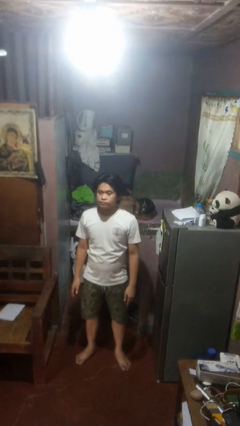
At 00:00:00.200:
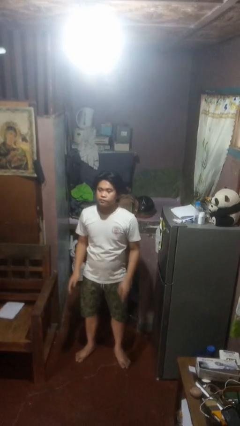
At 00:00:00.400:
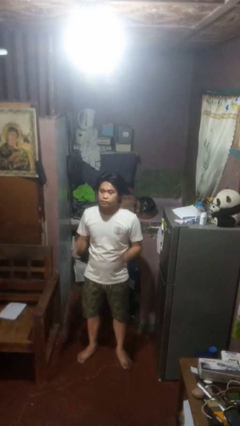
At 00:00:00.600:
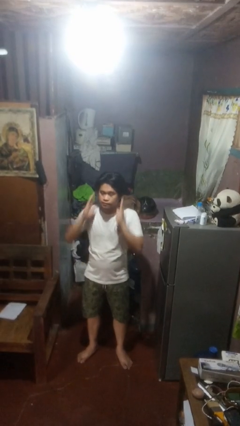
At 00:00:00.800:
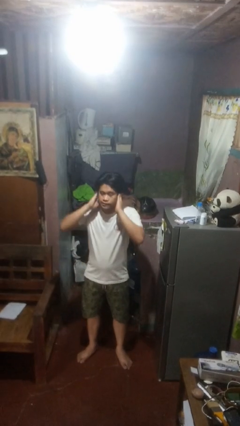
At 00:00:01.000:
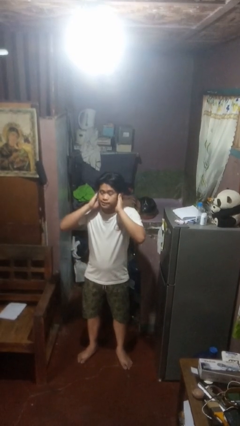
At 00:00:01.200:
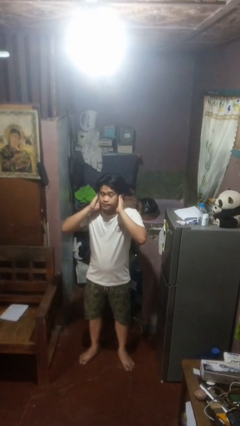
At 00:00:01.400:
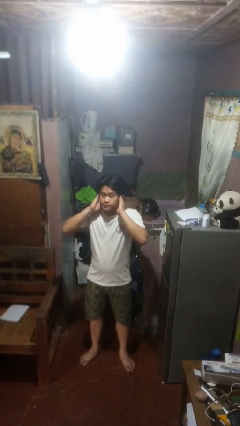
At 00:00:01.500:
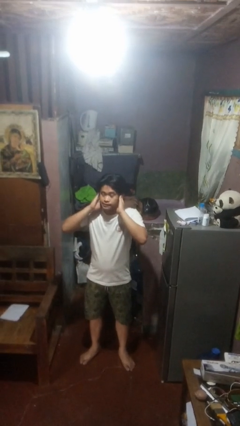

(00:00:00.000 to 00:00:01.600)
person puts fingers in ear

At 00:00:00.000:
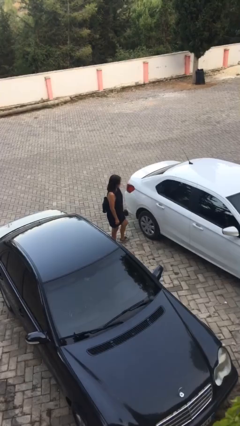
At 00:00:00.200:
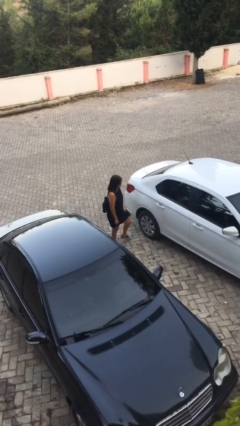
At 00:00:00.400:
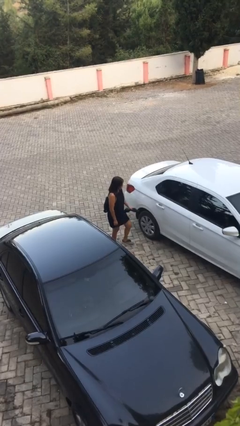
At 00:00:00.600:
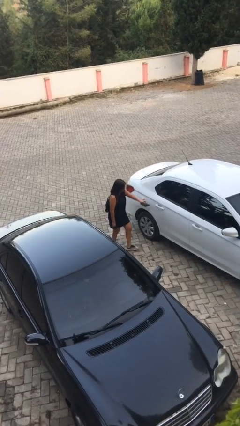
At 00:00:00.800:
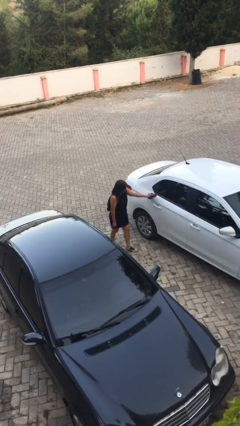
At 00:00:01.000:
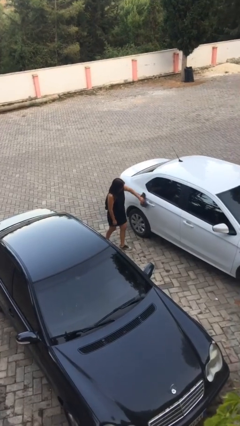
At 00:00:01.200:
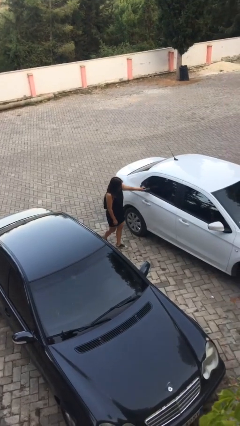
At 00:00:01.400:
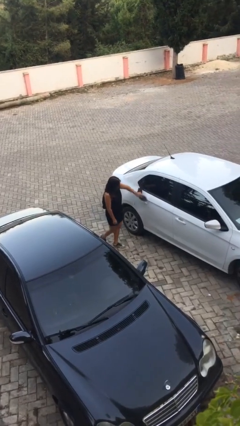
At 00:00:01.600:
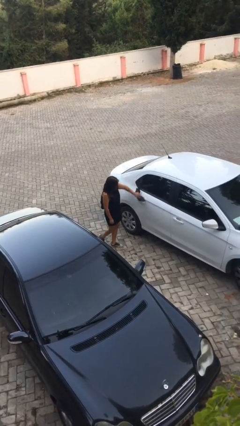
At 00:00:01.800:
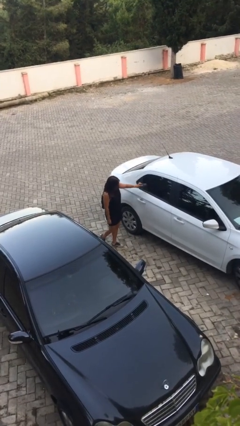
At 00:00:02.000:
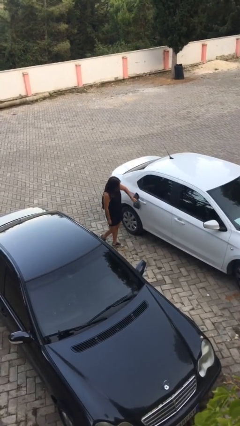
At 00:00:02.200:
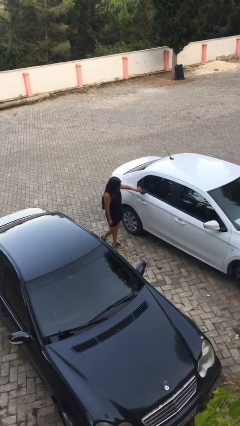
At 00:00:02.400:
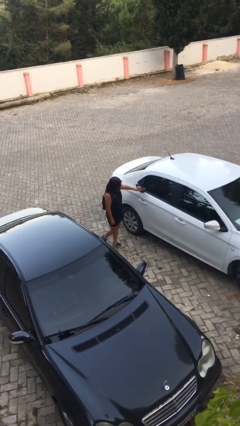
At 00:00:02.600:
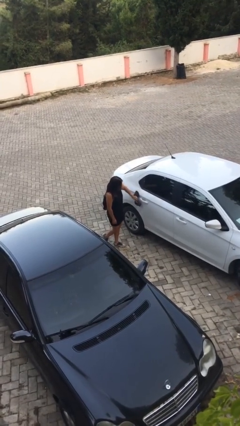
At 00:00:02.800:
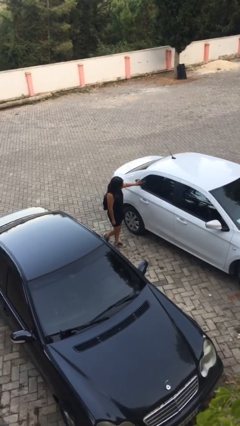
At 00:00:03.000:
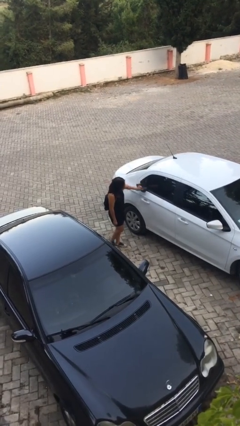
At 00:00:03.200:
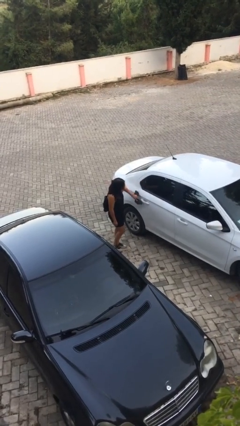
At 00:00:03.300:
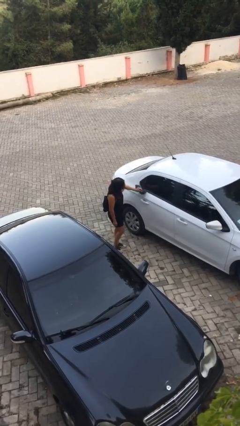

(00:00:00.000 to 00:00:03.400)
person polishes car with rag

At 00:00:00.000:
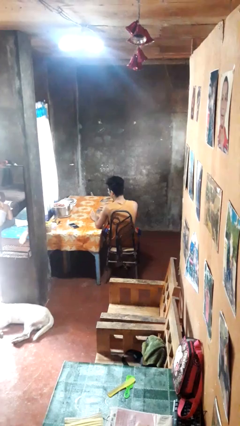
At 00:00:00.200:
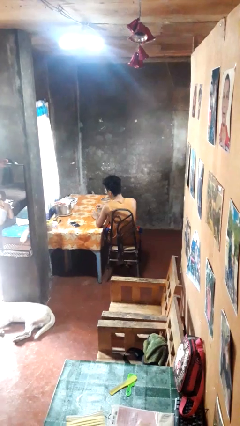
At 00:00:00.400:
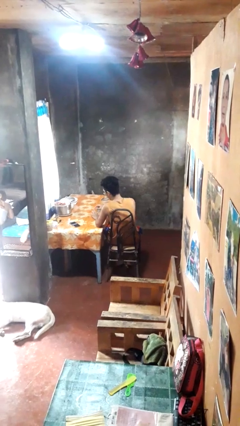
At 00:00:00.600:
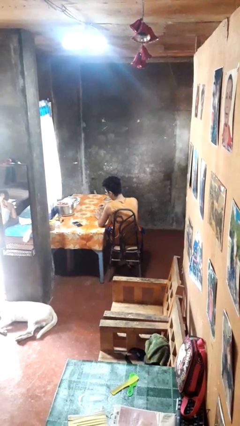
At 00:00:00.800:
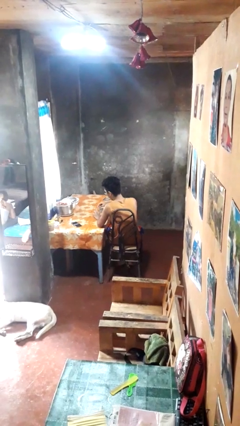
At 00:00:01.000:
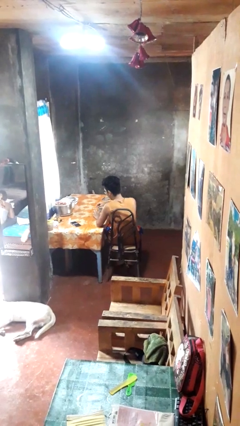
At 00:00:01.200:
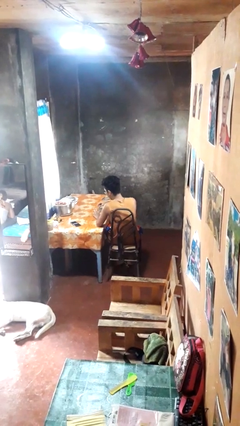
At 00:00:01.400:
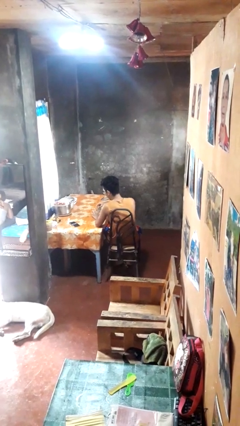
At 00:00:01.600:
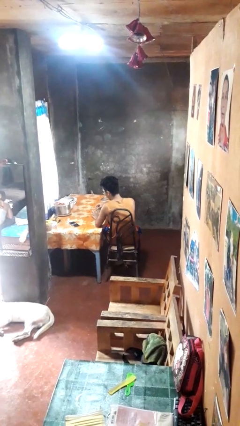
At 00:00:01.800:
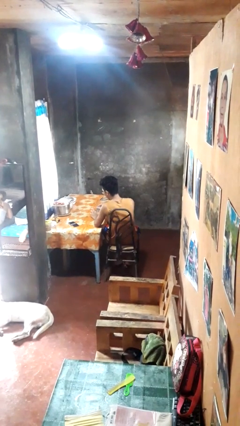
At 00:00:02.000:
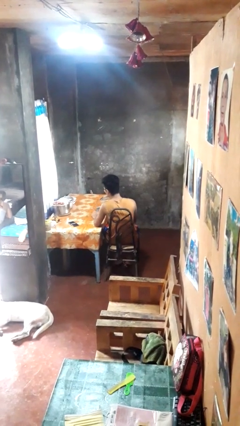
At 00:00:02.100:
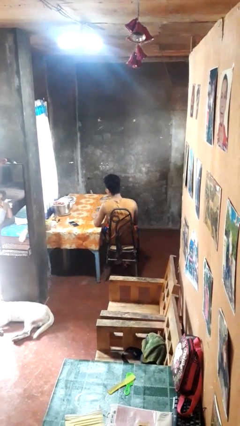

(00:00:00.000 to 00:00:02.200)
person files fingernails

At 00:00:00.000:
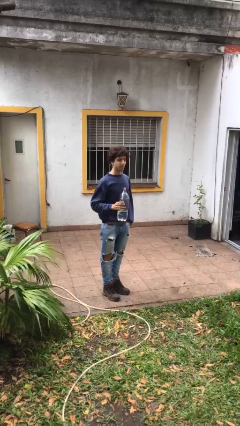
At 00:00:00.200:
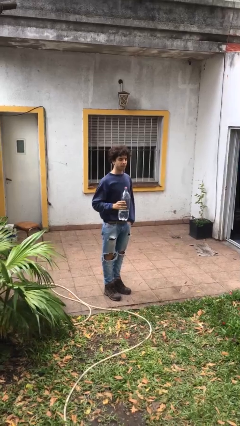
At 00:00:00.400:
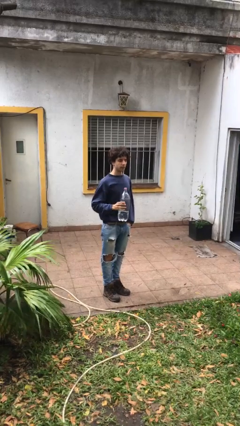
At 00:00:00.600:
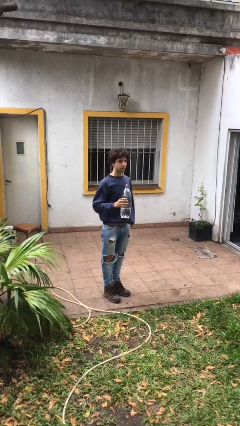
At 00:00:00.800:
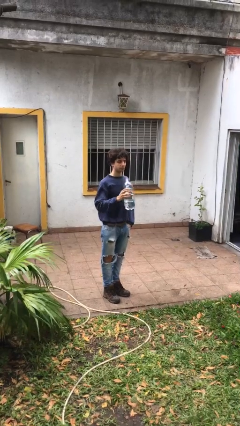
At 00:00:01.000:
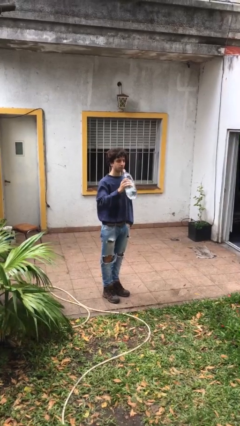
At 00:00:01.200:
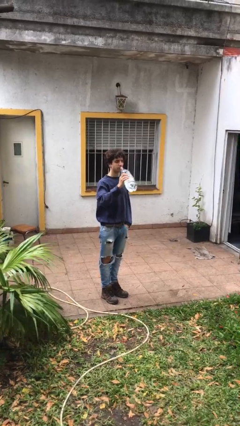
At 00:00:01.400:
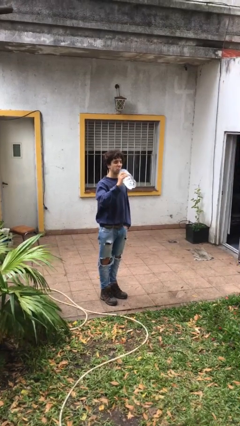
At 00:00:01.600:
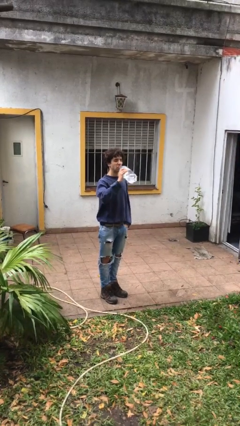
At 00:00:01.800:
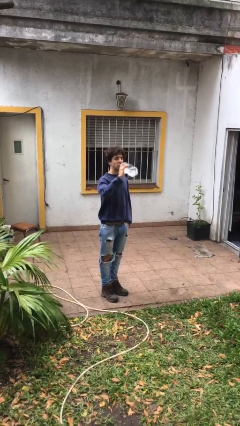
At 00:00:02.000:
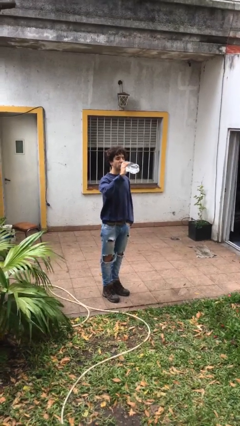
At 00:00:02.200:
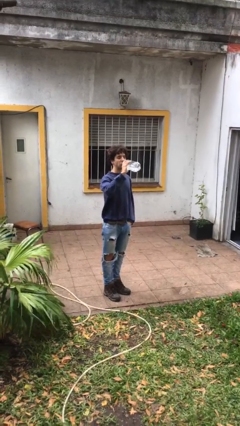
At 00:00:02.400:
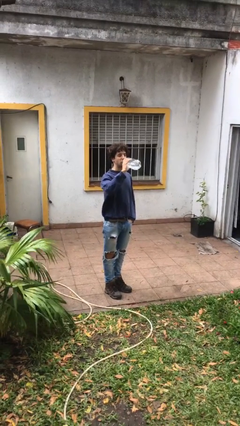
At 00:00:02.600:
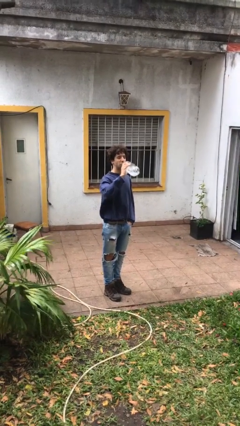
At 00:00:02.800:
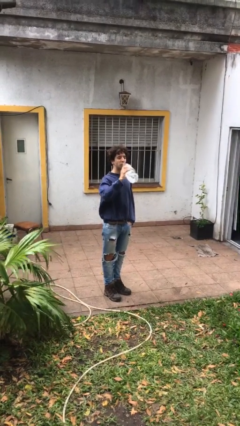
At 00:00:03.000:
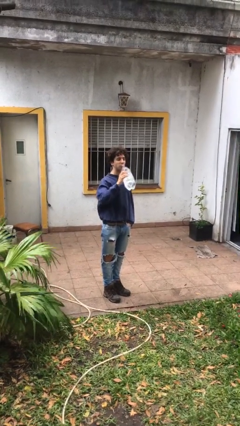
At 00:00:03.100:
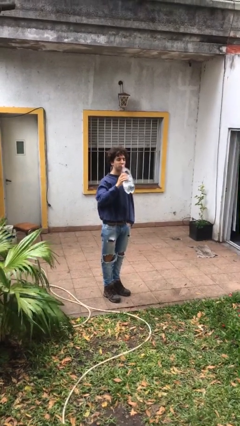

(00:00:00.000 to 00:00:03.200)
person drinks from bottle

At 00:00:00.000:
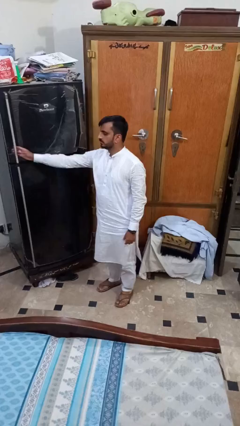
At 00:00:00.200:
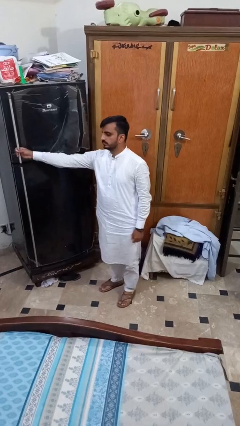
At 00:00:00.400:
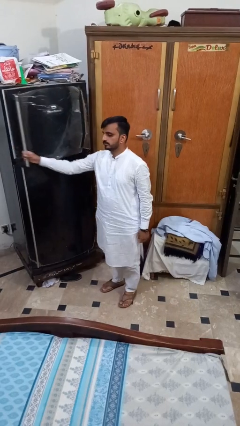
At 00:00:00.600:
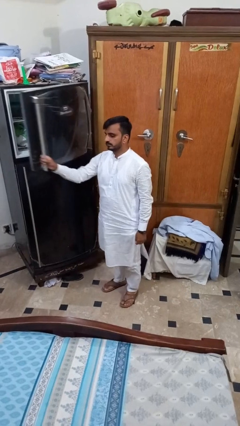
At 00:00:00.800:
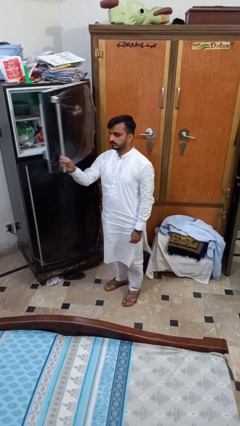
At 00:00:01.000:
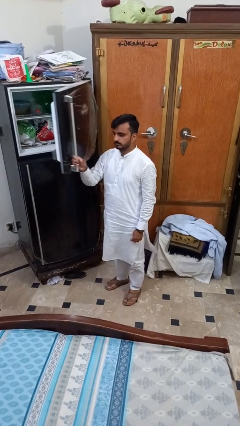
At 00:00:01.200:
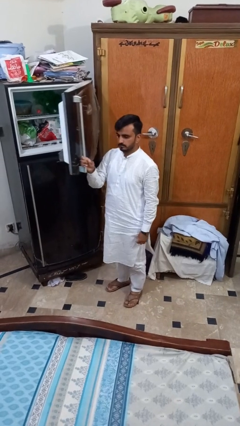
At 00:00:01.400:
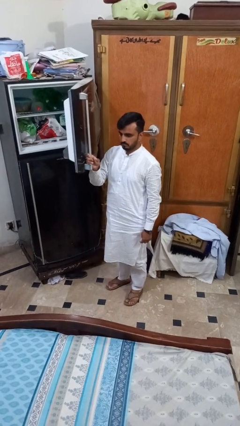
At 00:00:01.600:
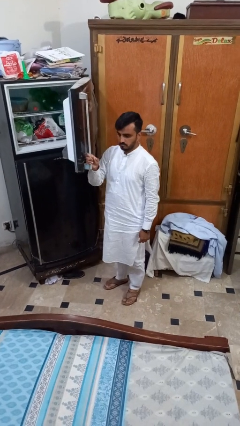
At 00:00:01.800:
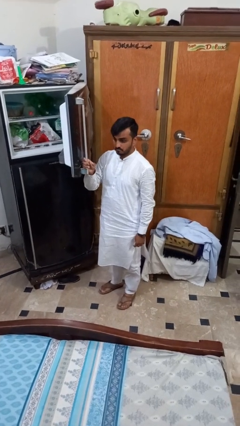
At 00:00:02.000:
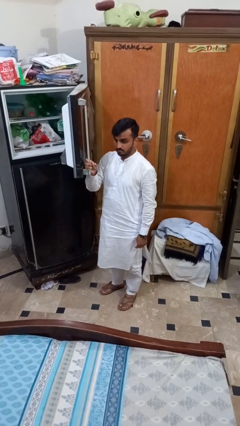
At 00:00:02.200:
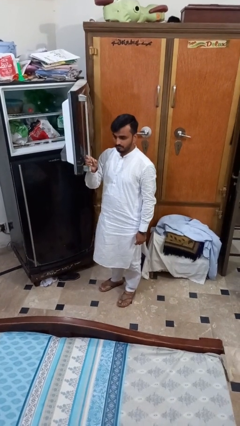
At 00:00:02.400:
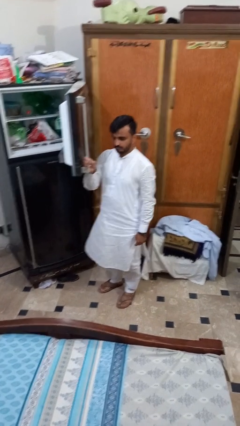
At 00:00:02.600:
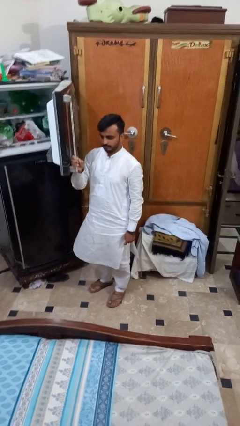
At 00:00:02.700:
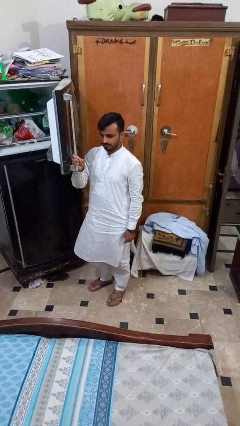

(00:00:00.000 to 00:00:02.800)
person opens refrigerator

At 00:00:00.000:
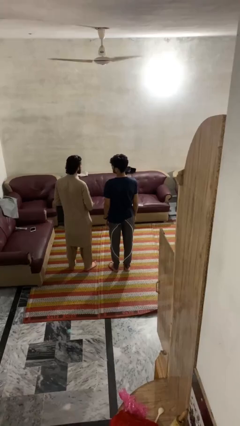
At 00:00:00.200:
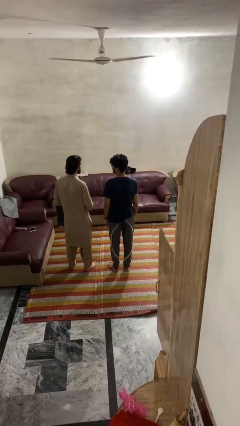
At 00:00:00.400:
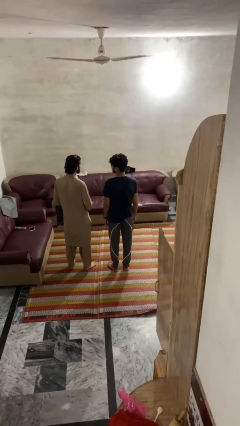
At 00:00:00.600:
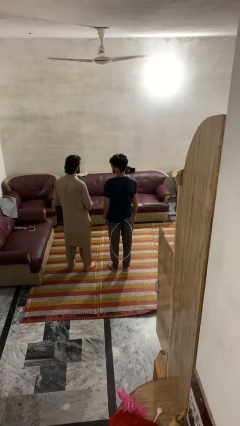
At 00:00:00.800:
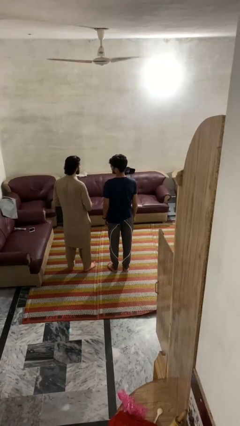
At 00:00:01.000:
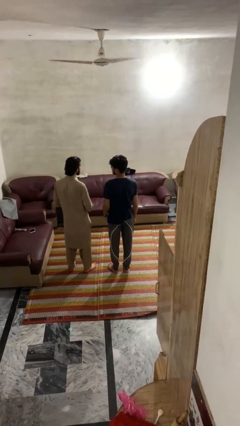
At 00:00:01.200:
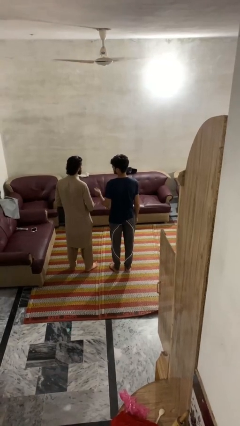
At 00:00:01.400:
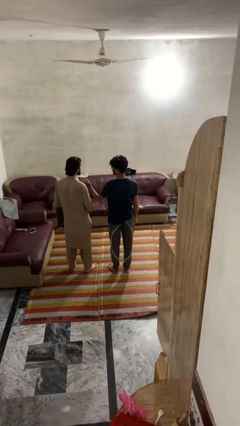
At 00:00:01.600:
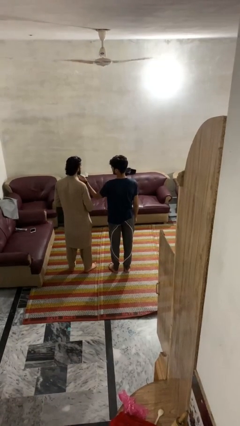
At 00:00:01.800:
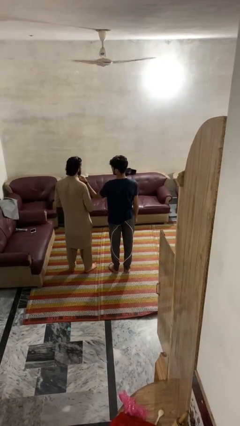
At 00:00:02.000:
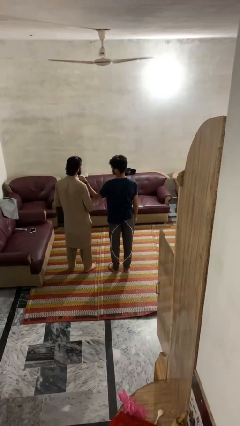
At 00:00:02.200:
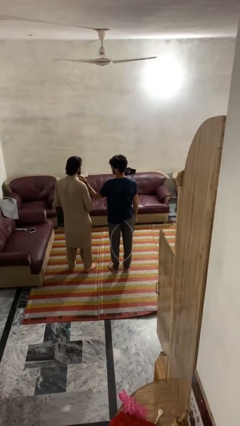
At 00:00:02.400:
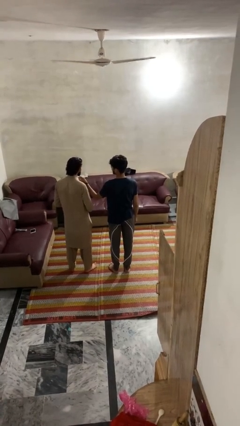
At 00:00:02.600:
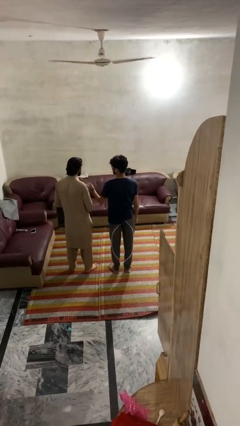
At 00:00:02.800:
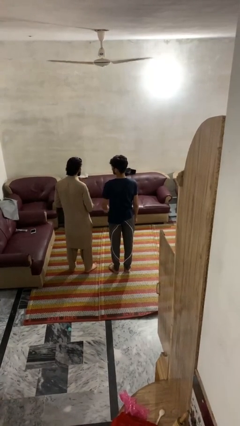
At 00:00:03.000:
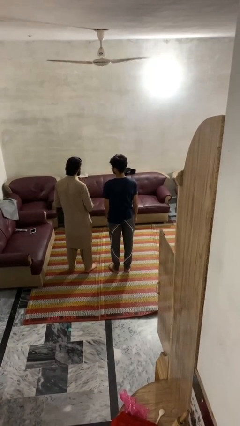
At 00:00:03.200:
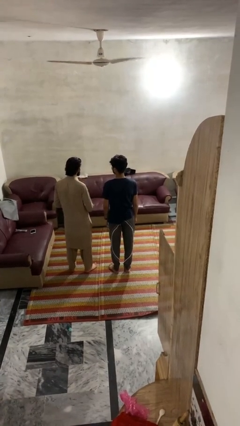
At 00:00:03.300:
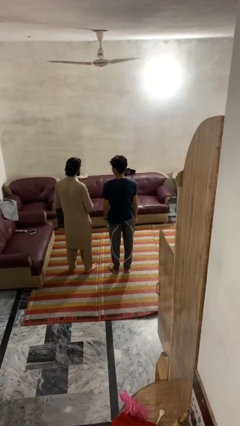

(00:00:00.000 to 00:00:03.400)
person touches face of person

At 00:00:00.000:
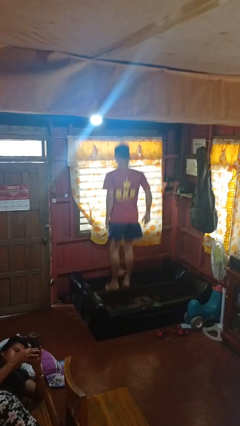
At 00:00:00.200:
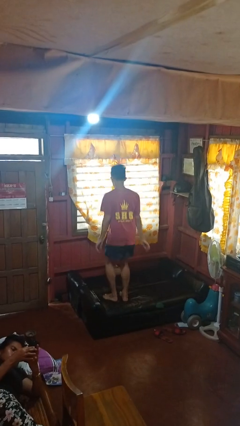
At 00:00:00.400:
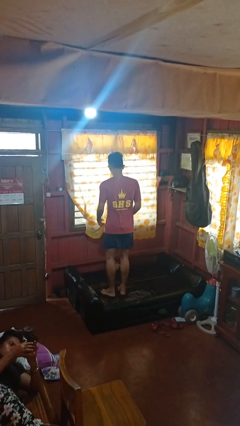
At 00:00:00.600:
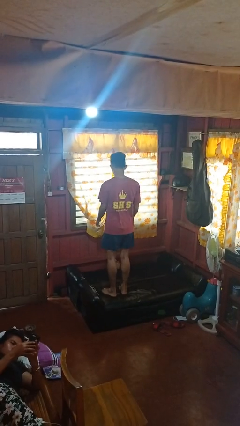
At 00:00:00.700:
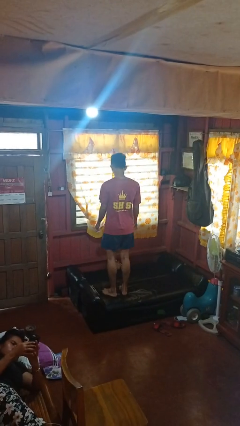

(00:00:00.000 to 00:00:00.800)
person jumps on couch
